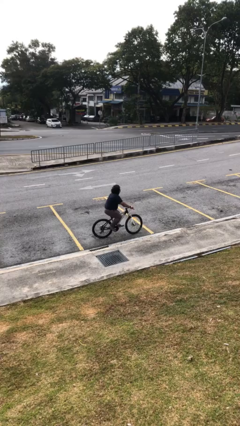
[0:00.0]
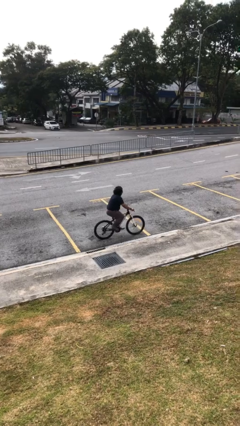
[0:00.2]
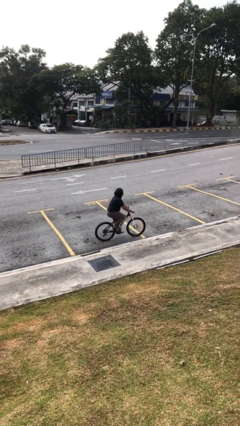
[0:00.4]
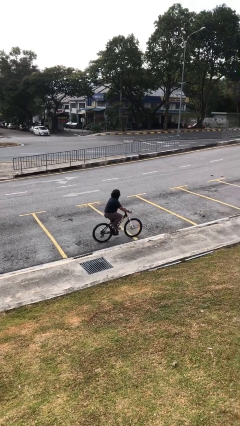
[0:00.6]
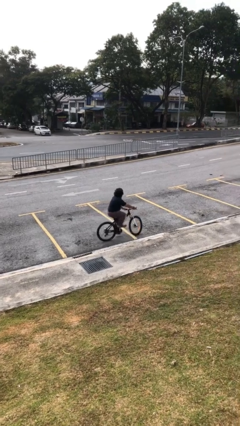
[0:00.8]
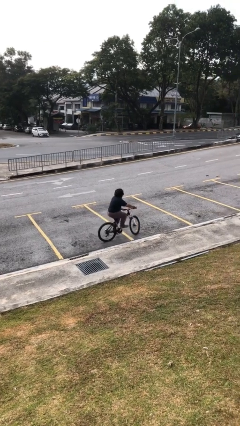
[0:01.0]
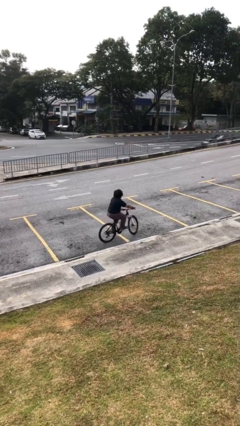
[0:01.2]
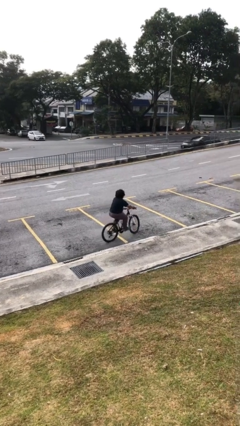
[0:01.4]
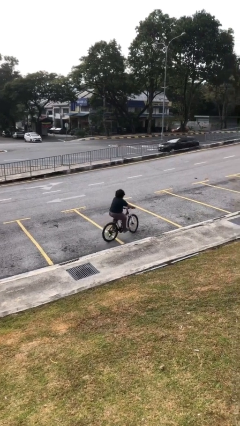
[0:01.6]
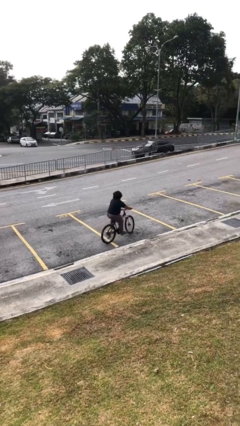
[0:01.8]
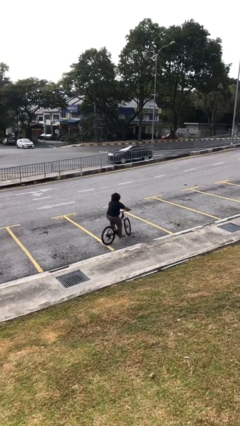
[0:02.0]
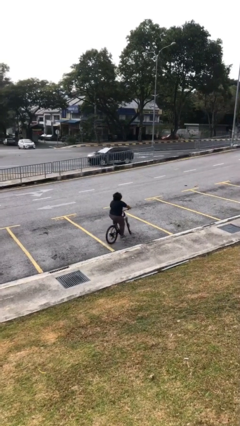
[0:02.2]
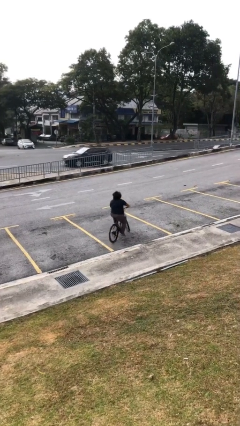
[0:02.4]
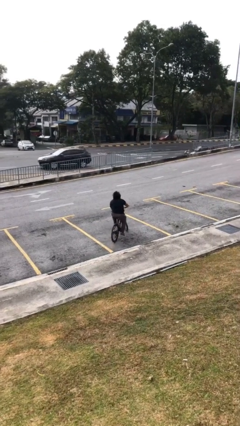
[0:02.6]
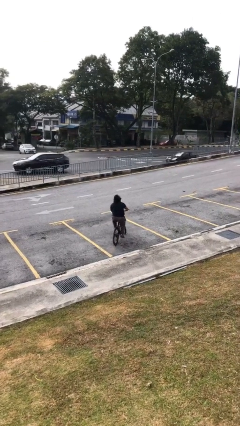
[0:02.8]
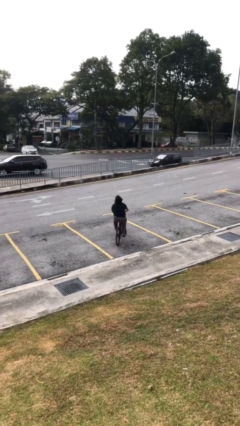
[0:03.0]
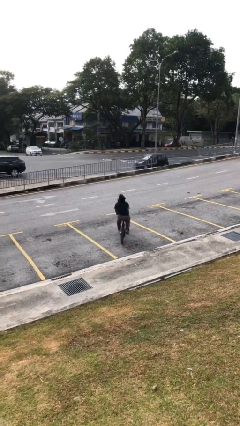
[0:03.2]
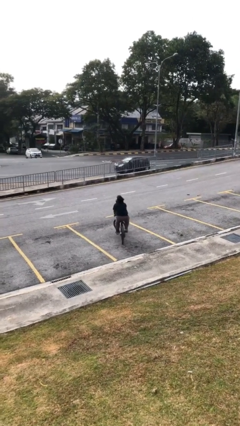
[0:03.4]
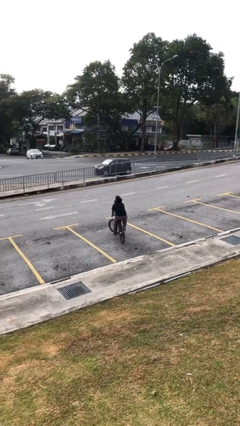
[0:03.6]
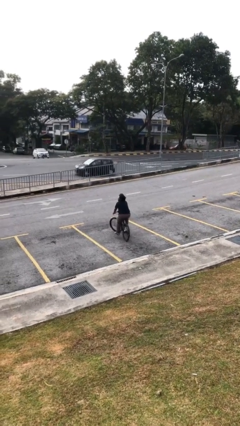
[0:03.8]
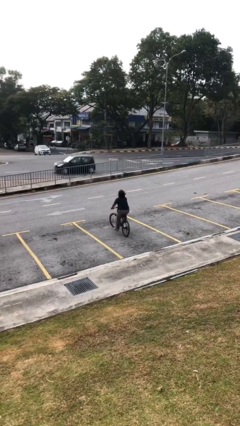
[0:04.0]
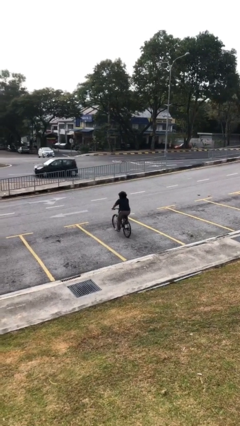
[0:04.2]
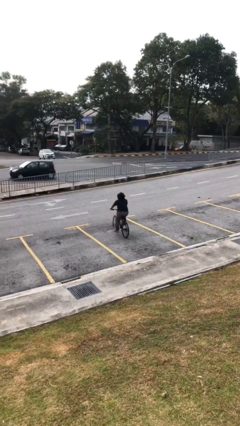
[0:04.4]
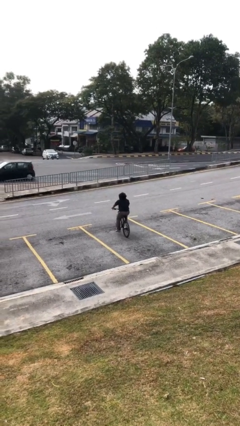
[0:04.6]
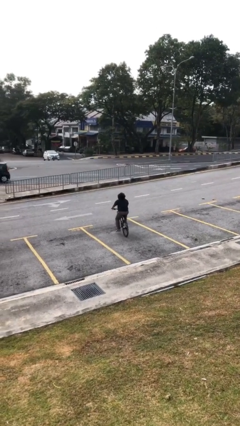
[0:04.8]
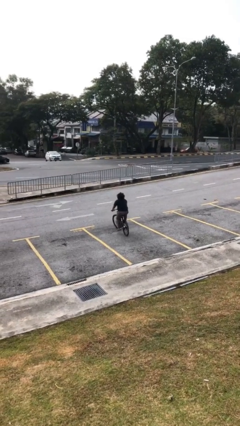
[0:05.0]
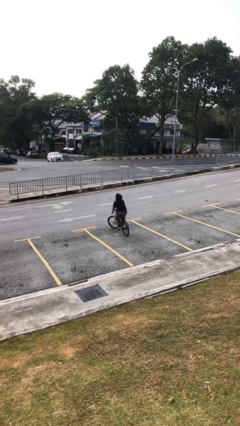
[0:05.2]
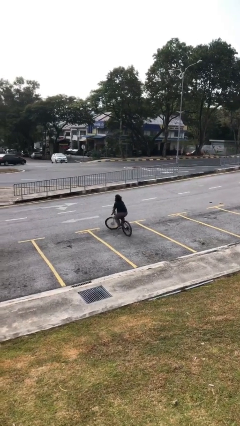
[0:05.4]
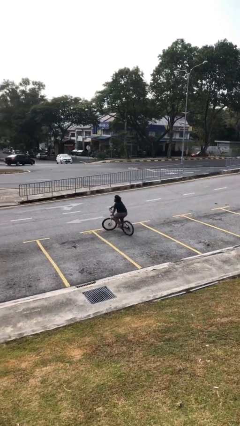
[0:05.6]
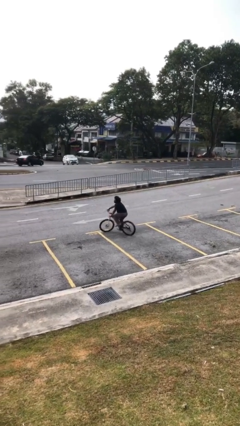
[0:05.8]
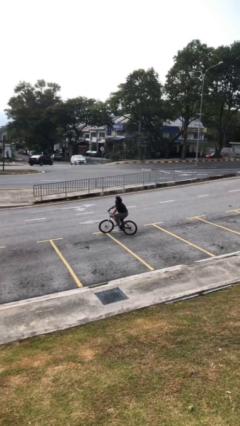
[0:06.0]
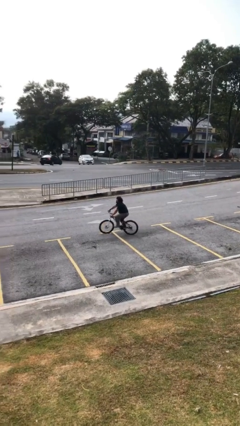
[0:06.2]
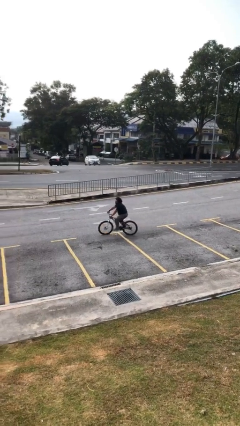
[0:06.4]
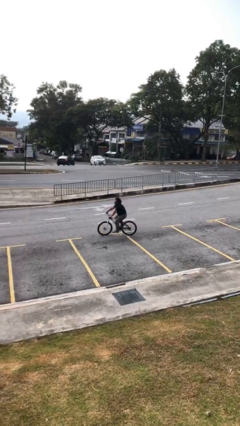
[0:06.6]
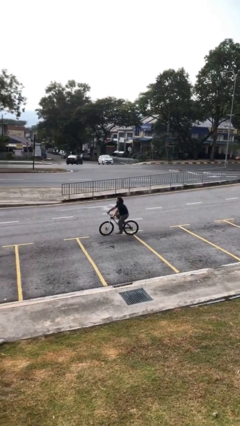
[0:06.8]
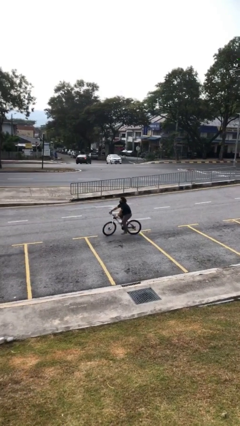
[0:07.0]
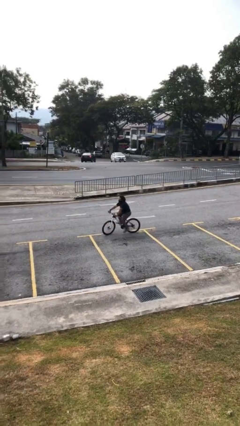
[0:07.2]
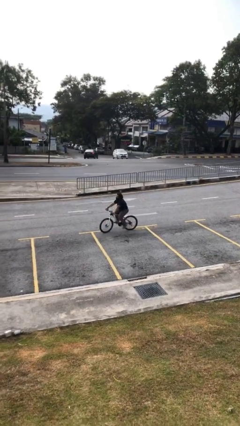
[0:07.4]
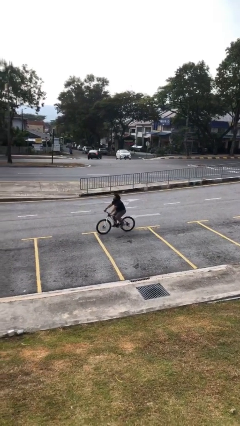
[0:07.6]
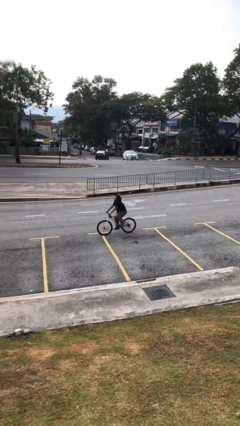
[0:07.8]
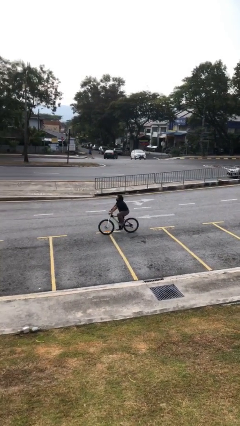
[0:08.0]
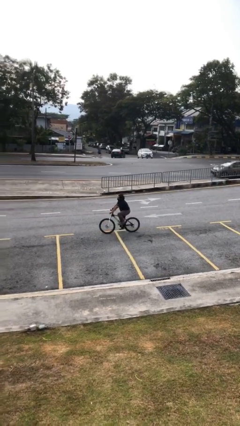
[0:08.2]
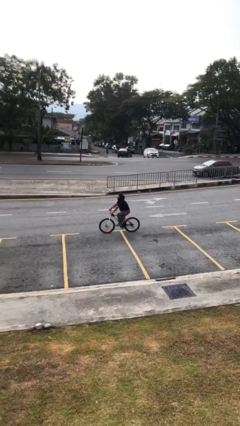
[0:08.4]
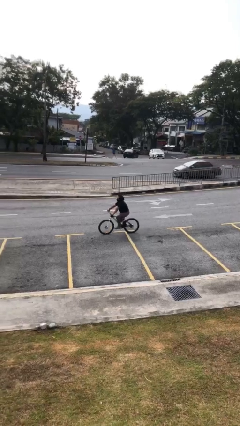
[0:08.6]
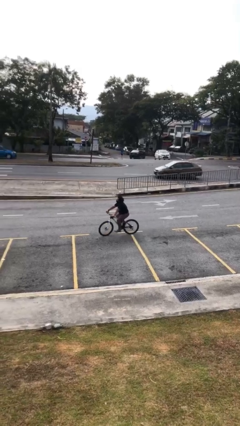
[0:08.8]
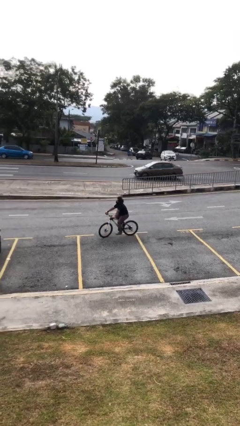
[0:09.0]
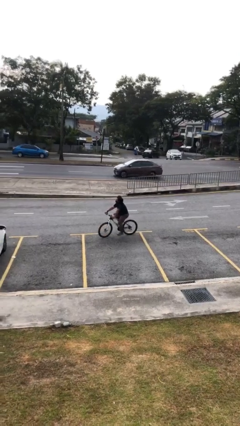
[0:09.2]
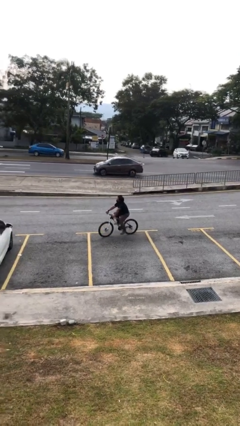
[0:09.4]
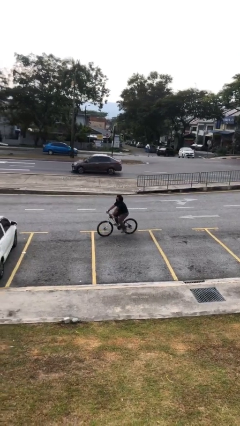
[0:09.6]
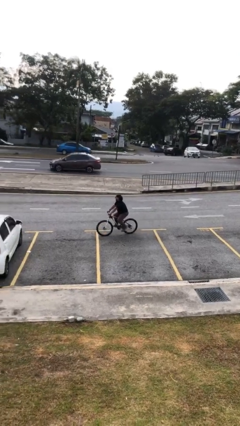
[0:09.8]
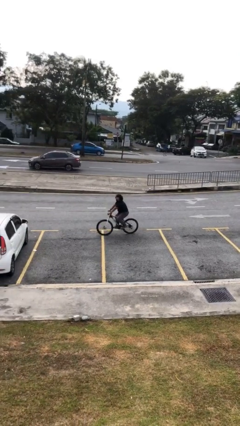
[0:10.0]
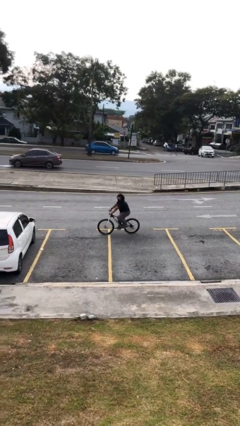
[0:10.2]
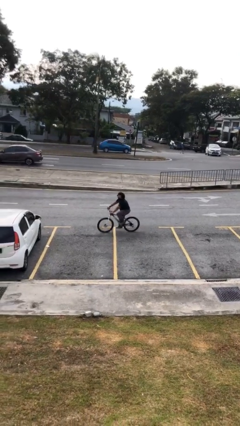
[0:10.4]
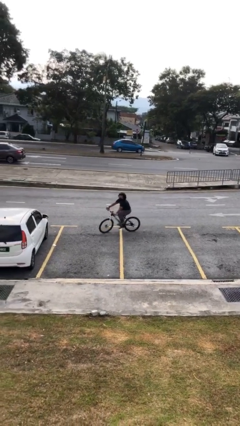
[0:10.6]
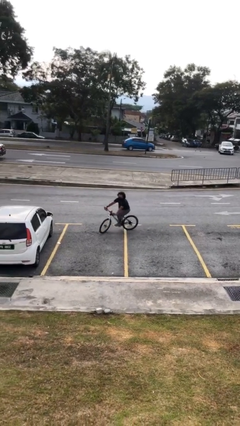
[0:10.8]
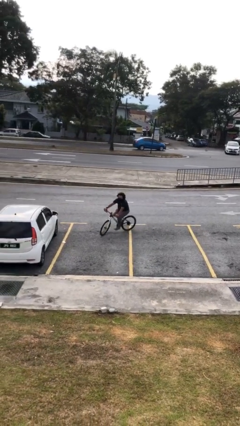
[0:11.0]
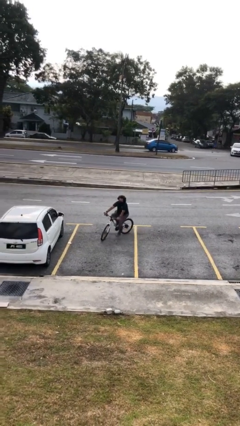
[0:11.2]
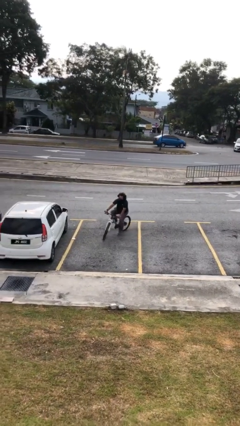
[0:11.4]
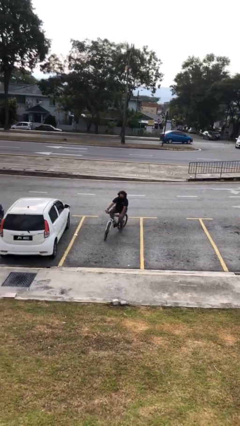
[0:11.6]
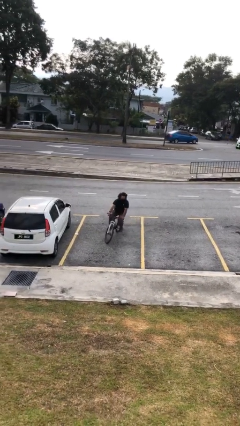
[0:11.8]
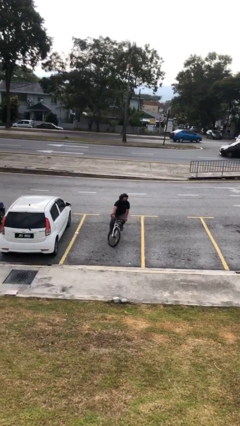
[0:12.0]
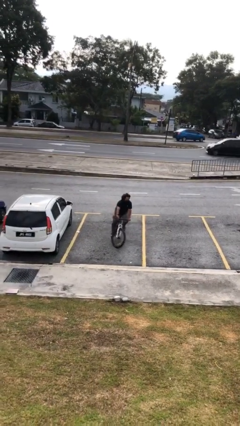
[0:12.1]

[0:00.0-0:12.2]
person rides bicycle

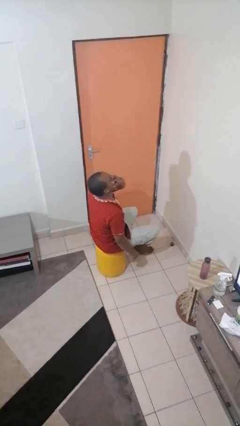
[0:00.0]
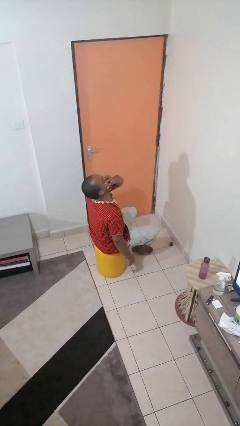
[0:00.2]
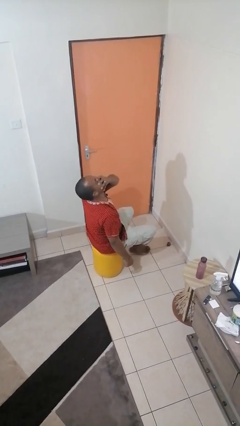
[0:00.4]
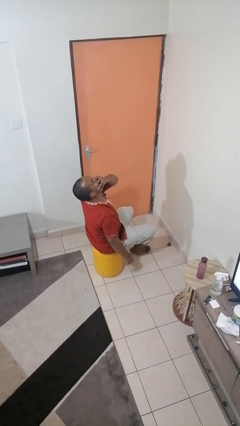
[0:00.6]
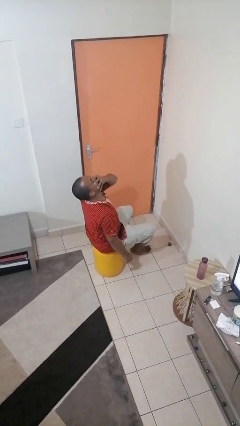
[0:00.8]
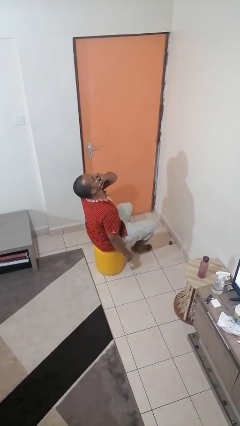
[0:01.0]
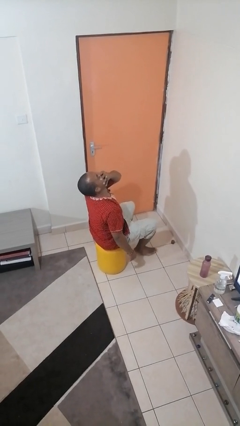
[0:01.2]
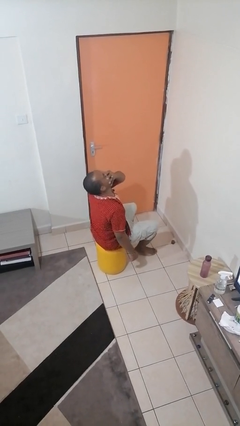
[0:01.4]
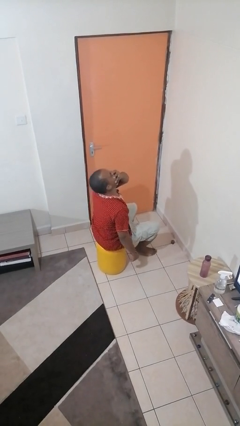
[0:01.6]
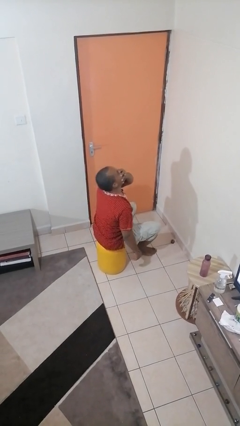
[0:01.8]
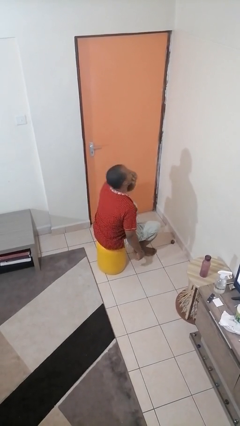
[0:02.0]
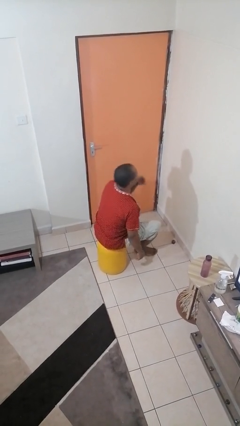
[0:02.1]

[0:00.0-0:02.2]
person yawns

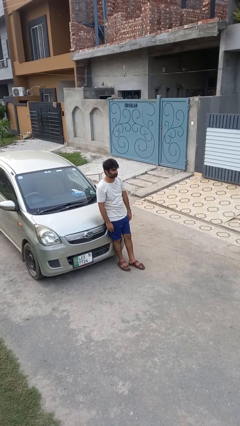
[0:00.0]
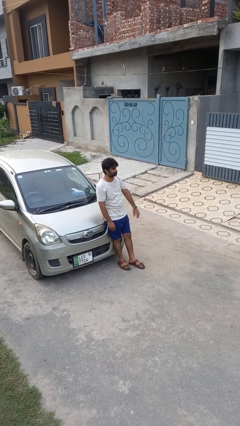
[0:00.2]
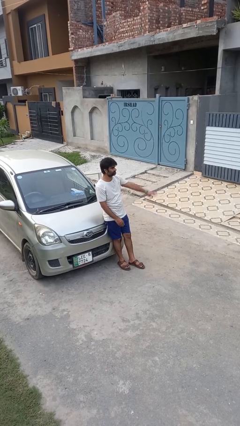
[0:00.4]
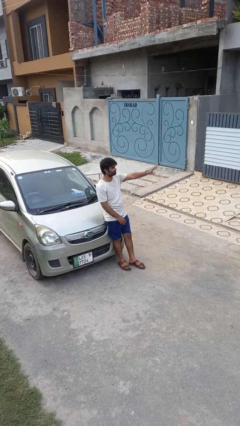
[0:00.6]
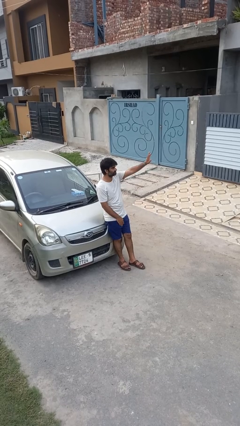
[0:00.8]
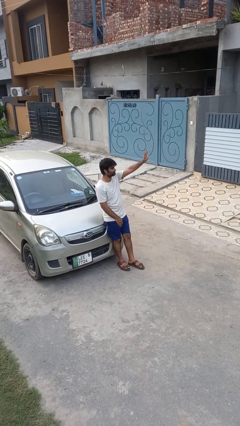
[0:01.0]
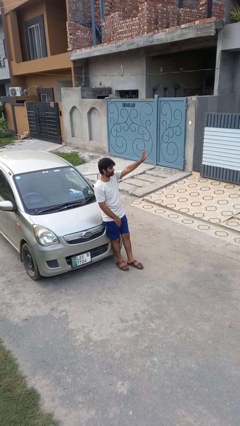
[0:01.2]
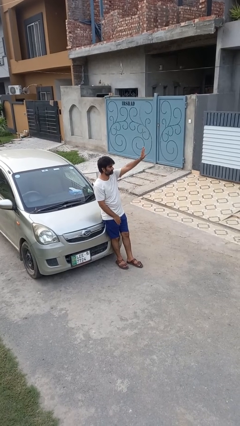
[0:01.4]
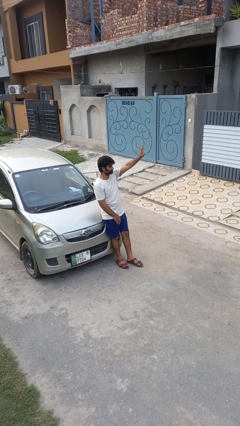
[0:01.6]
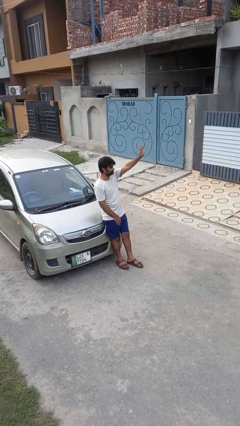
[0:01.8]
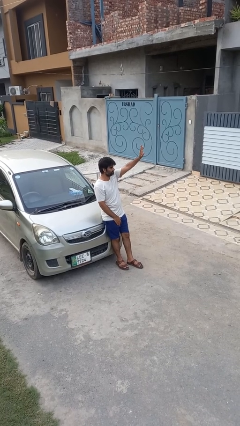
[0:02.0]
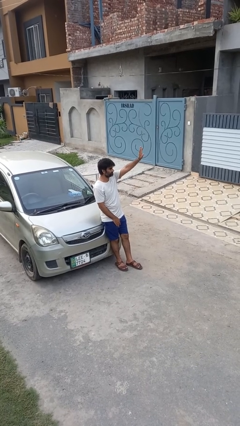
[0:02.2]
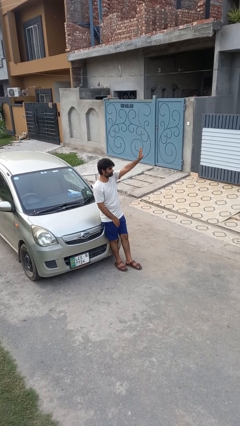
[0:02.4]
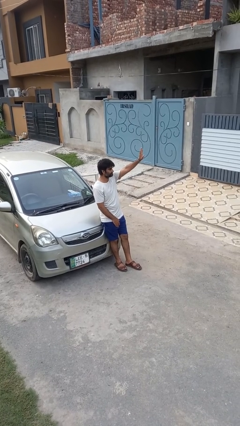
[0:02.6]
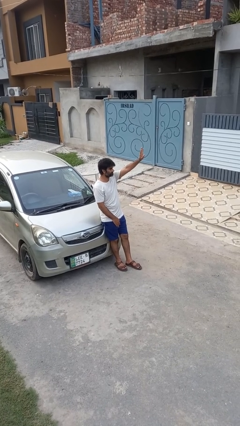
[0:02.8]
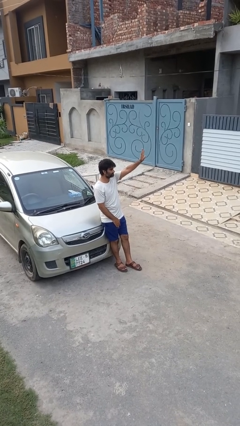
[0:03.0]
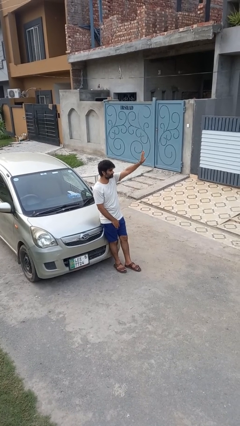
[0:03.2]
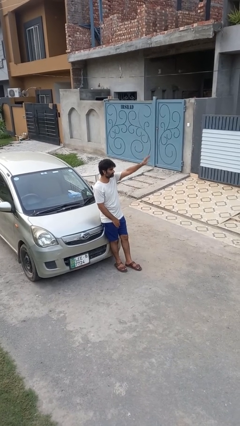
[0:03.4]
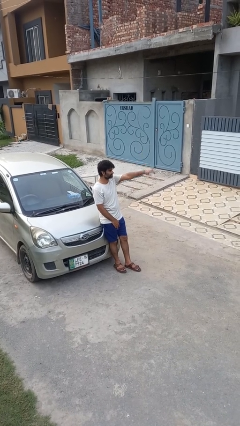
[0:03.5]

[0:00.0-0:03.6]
person gestures raise hand
